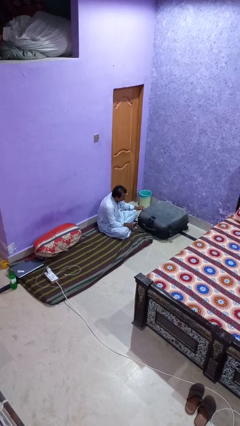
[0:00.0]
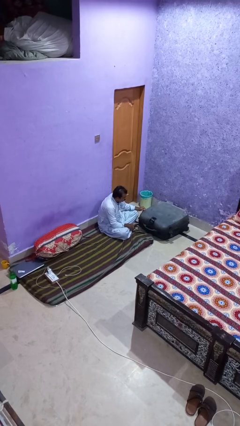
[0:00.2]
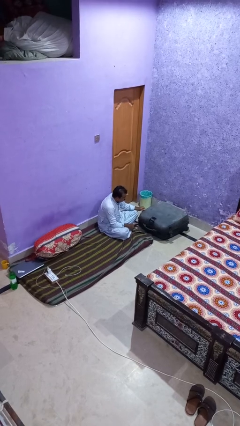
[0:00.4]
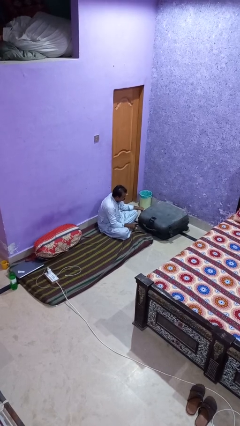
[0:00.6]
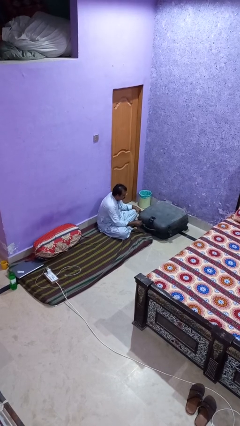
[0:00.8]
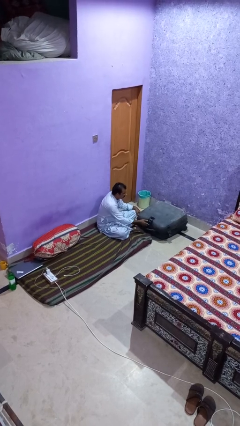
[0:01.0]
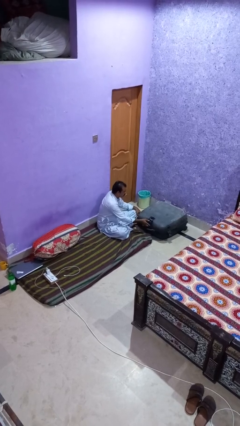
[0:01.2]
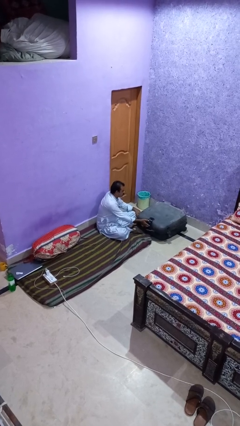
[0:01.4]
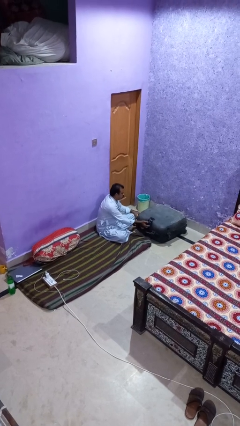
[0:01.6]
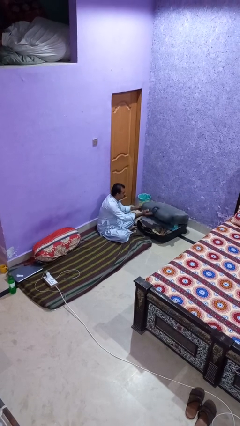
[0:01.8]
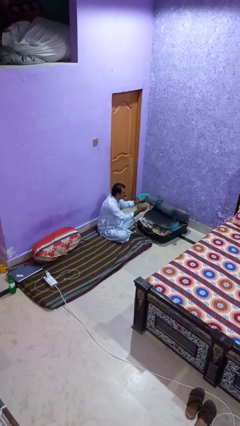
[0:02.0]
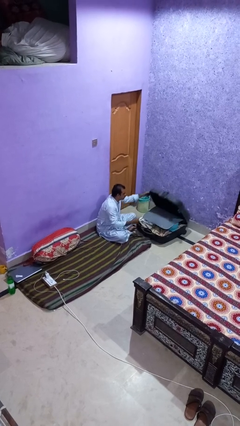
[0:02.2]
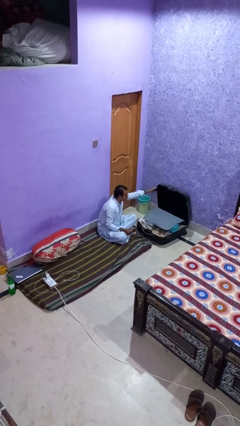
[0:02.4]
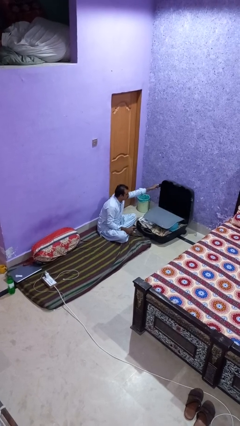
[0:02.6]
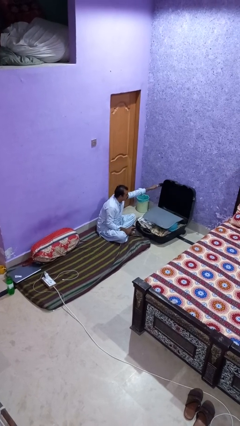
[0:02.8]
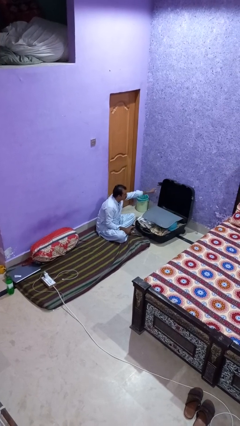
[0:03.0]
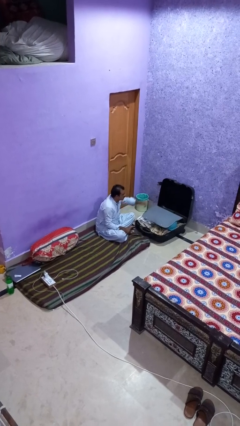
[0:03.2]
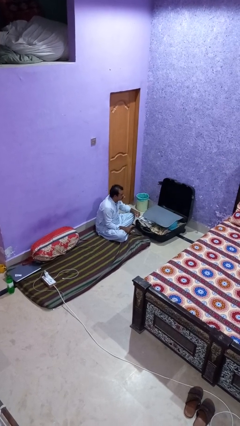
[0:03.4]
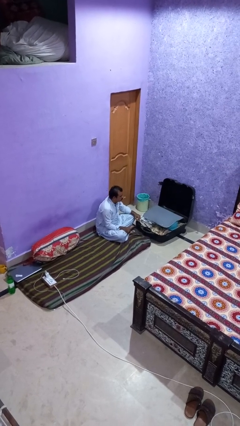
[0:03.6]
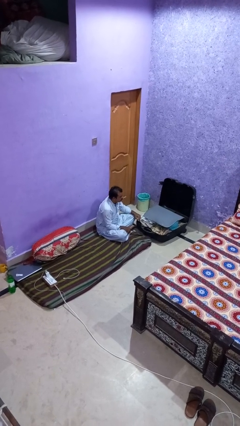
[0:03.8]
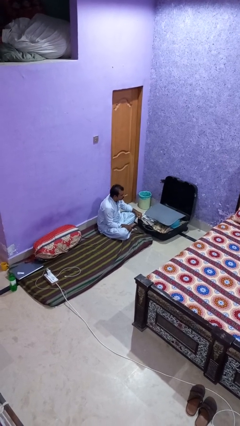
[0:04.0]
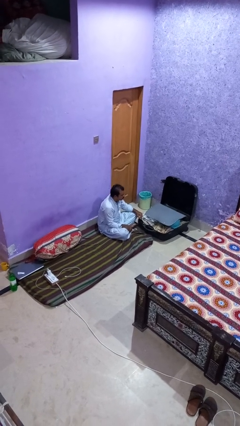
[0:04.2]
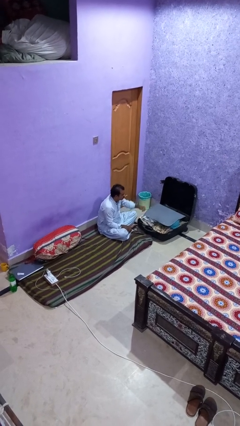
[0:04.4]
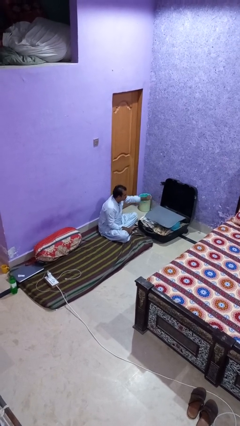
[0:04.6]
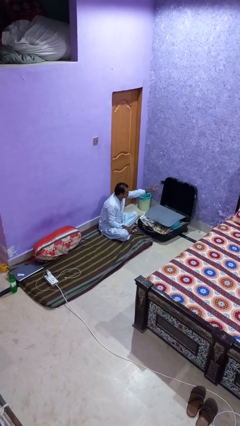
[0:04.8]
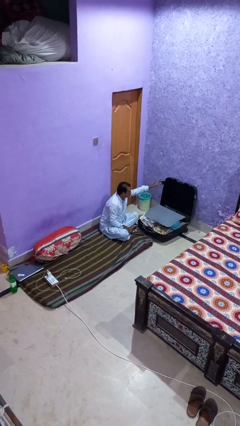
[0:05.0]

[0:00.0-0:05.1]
person opens suitcase

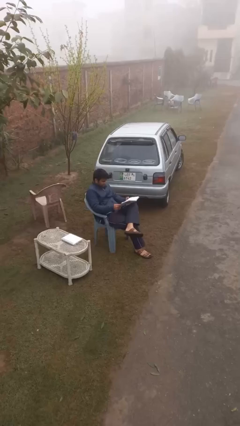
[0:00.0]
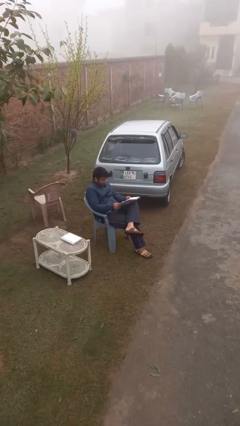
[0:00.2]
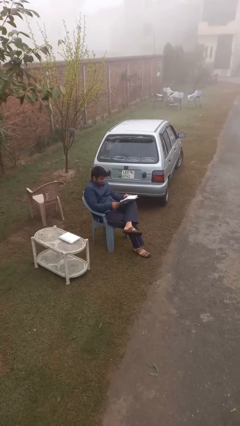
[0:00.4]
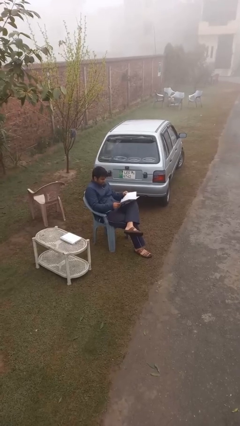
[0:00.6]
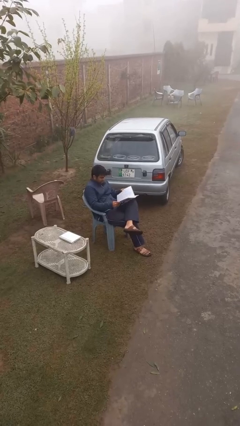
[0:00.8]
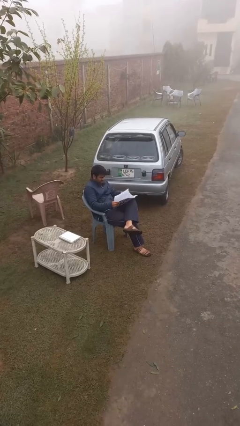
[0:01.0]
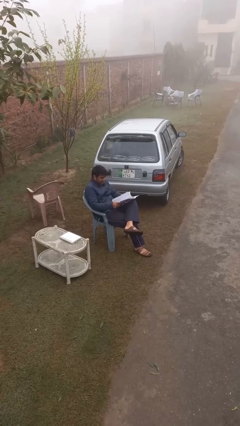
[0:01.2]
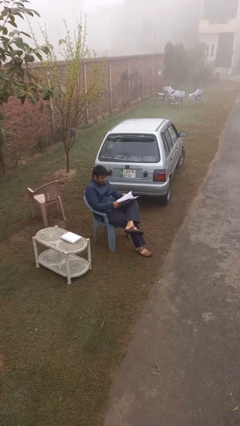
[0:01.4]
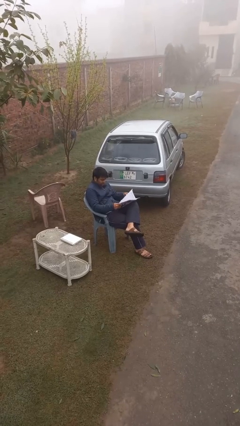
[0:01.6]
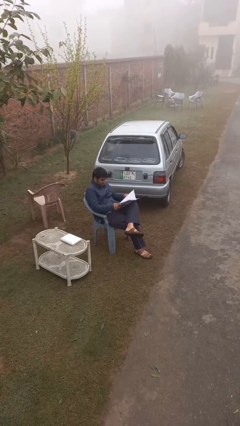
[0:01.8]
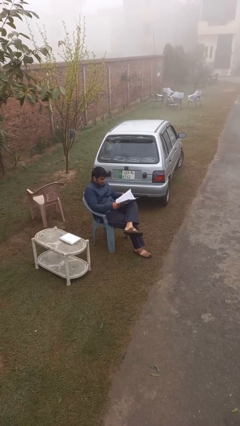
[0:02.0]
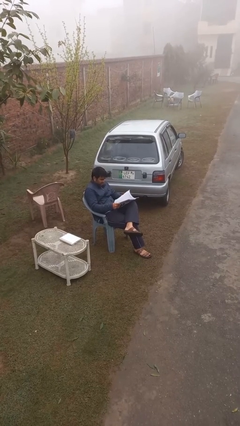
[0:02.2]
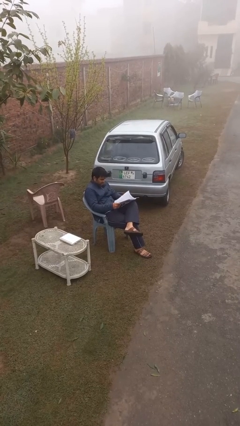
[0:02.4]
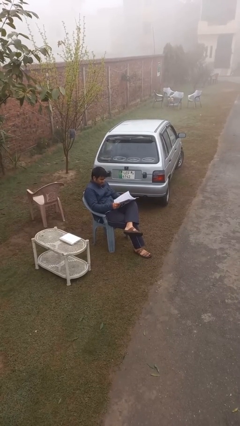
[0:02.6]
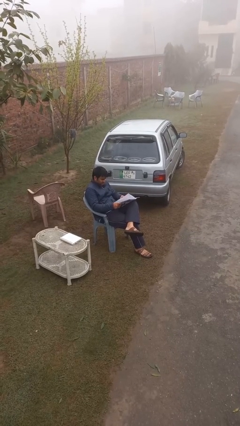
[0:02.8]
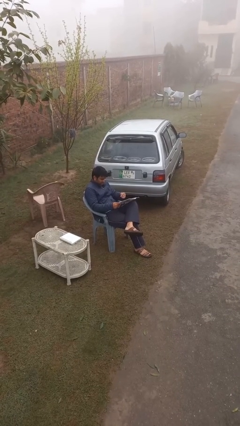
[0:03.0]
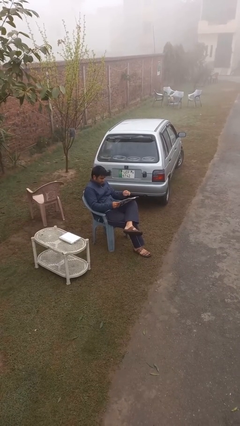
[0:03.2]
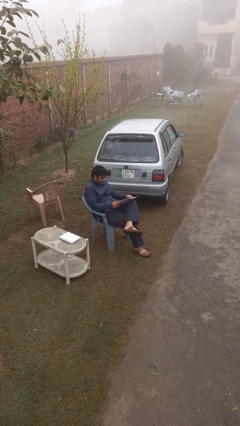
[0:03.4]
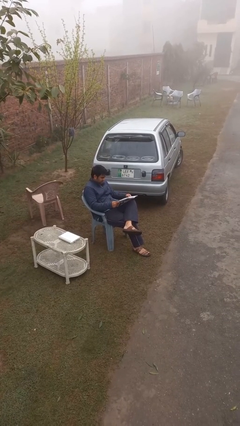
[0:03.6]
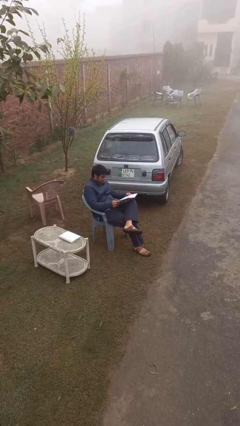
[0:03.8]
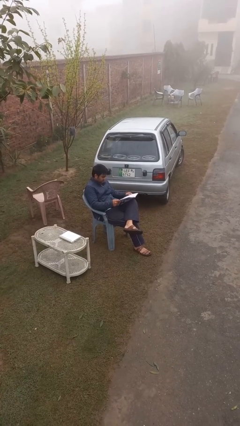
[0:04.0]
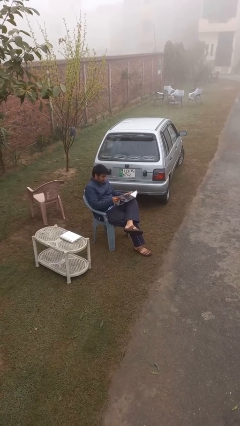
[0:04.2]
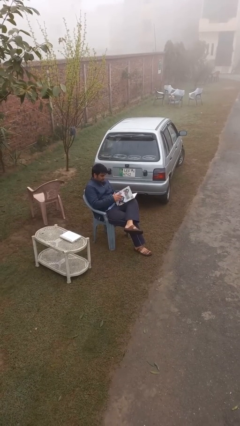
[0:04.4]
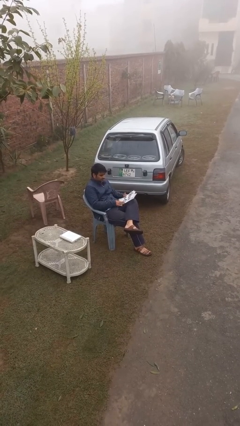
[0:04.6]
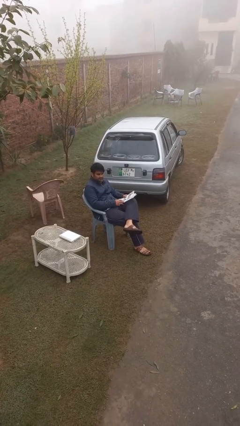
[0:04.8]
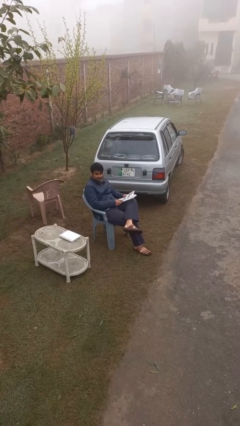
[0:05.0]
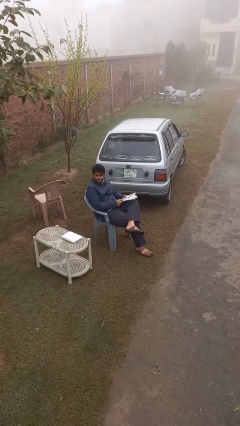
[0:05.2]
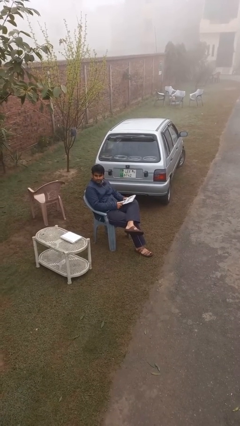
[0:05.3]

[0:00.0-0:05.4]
person reads document

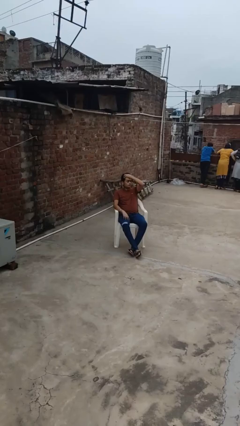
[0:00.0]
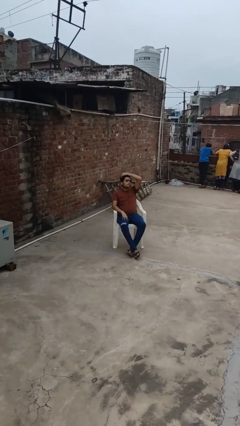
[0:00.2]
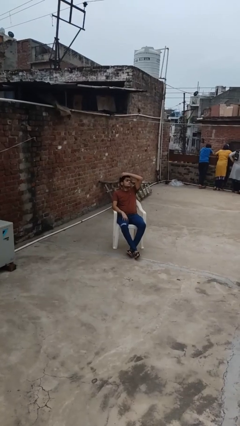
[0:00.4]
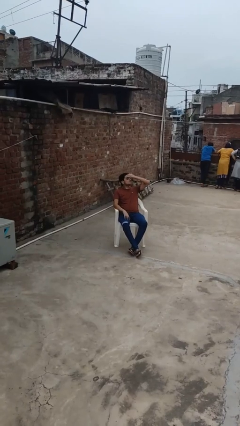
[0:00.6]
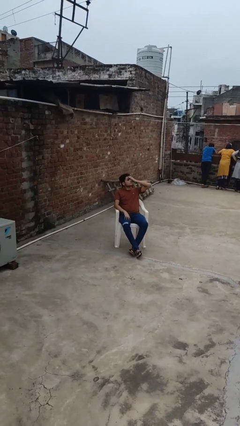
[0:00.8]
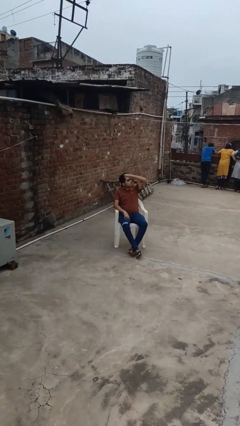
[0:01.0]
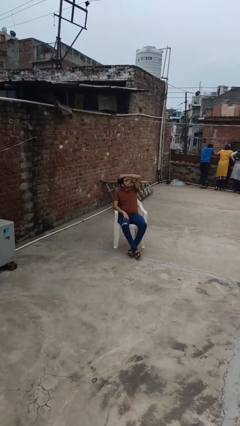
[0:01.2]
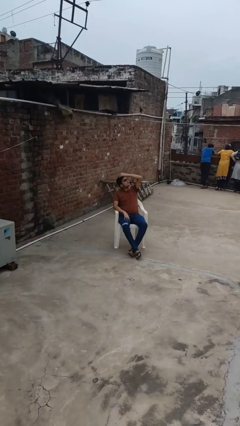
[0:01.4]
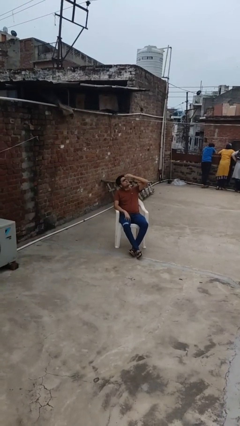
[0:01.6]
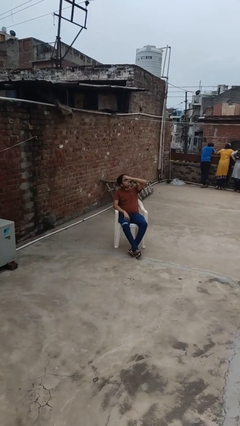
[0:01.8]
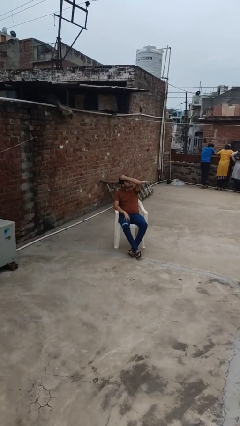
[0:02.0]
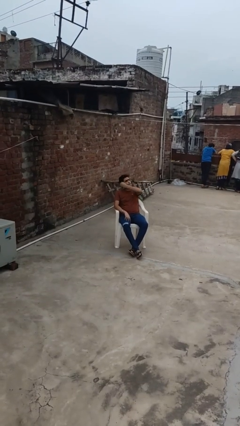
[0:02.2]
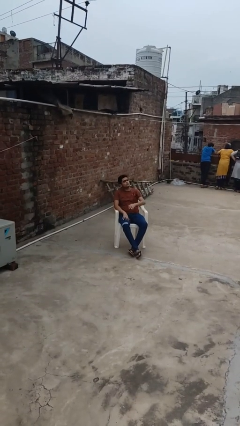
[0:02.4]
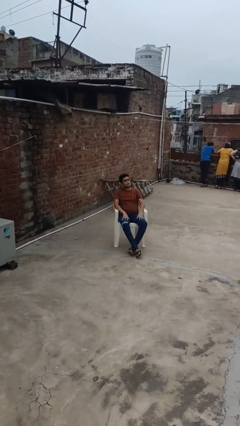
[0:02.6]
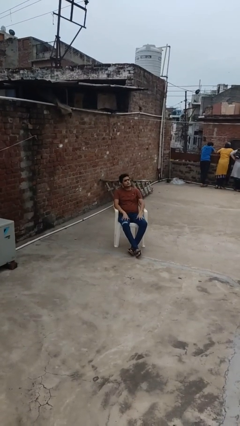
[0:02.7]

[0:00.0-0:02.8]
person strokes hair

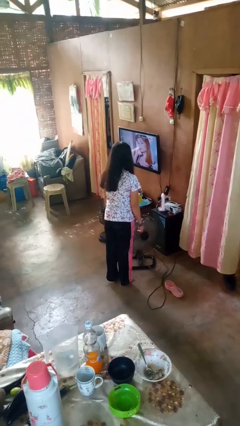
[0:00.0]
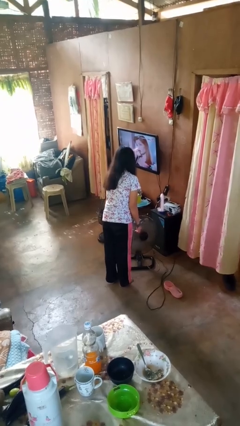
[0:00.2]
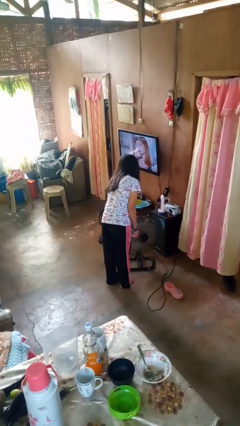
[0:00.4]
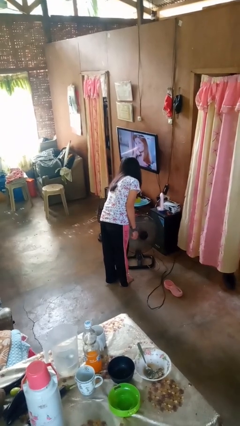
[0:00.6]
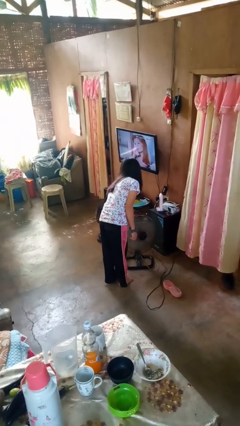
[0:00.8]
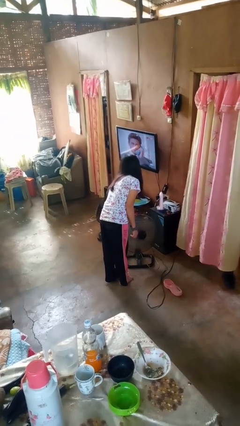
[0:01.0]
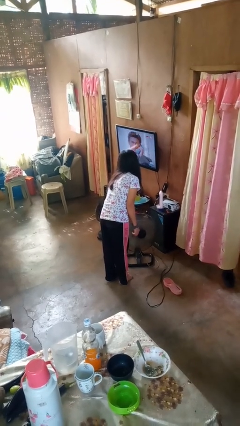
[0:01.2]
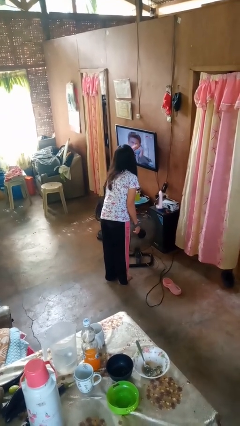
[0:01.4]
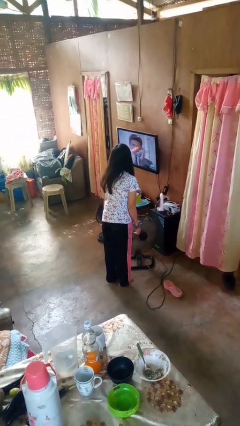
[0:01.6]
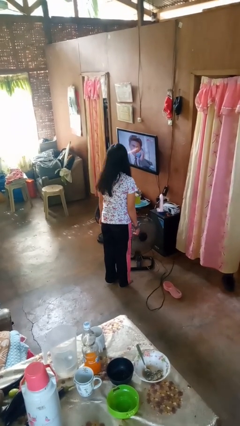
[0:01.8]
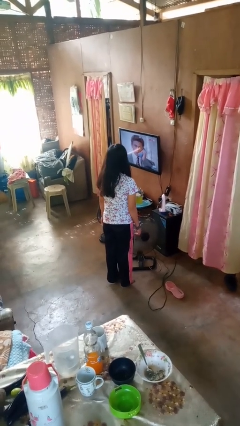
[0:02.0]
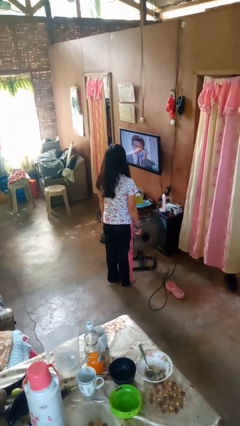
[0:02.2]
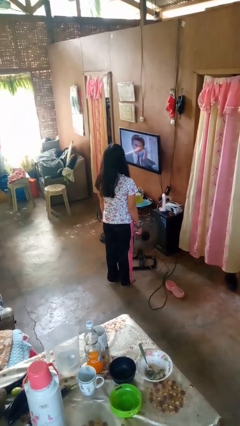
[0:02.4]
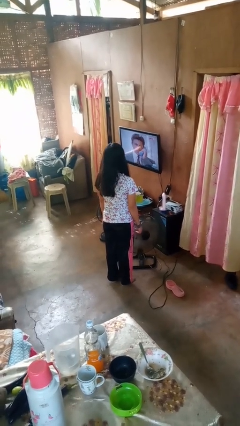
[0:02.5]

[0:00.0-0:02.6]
person turns off fan

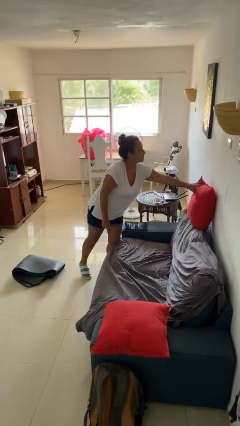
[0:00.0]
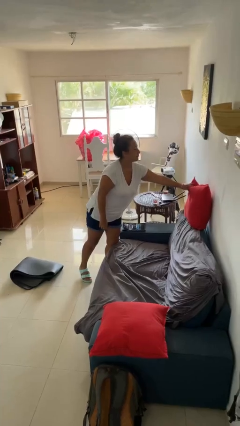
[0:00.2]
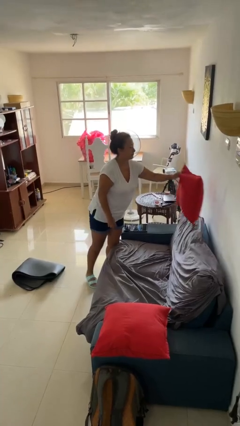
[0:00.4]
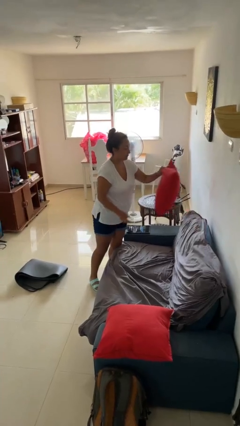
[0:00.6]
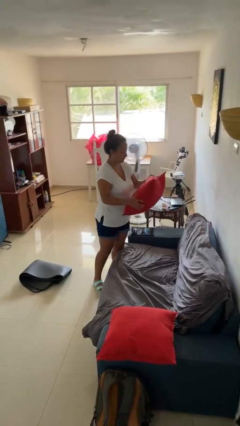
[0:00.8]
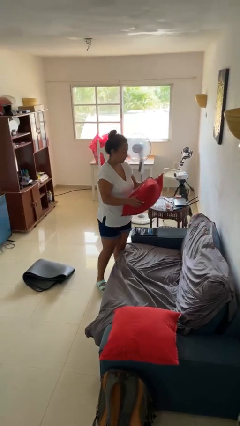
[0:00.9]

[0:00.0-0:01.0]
person picks up object from couch

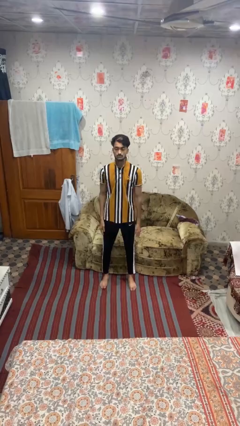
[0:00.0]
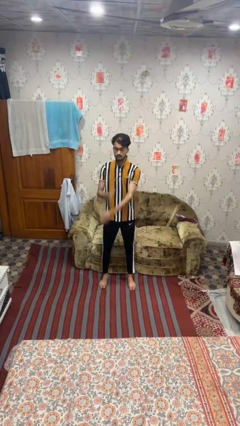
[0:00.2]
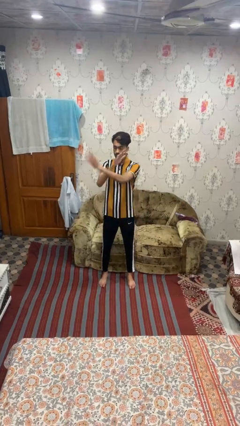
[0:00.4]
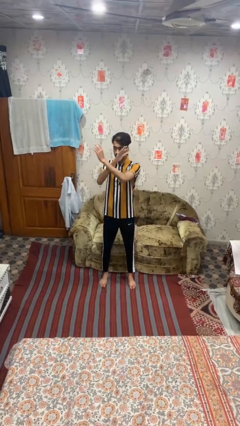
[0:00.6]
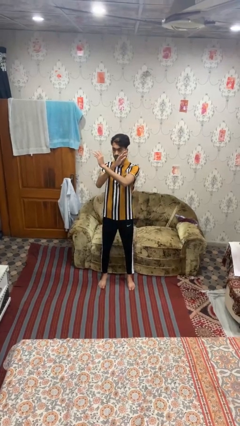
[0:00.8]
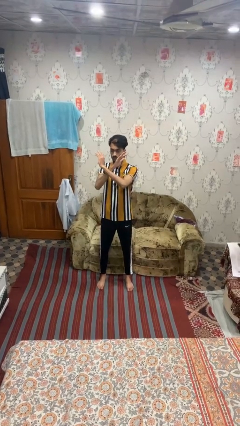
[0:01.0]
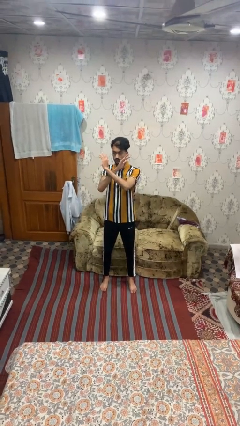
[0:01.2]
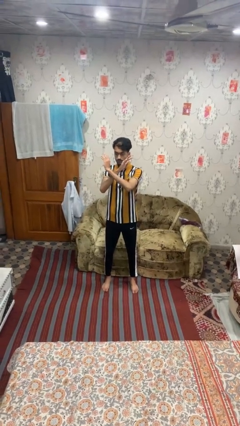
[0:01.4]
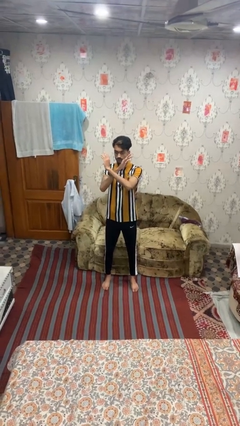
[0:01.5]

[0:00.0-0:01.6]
person gestures arms x
